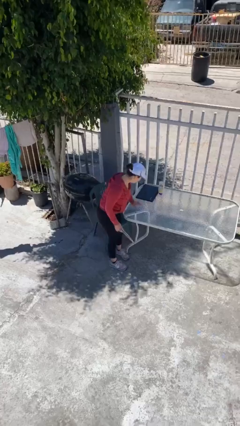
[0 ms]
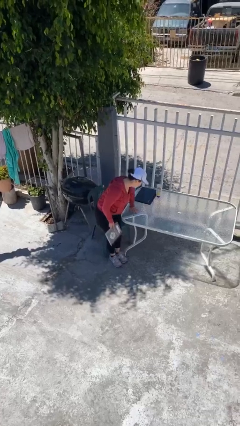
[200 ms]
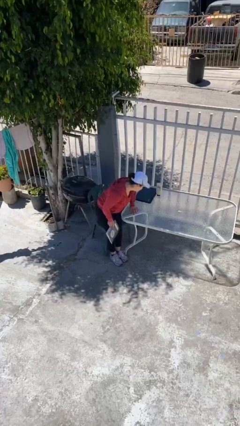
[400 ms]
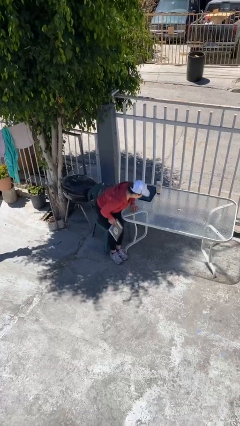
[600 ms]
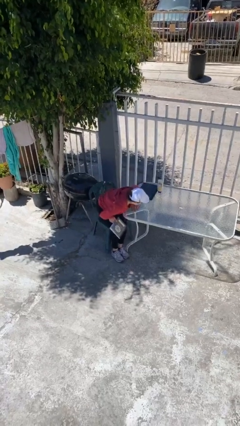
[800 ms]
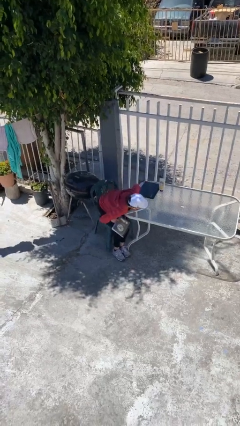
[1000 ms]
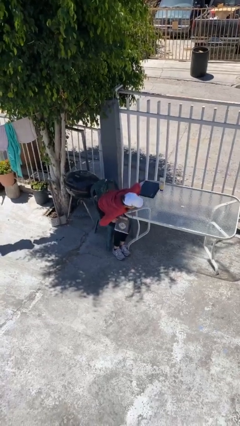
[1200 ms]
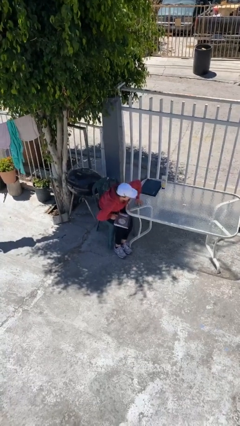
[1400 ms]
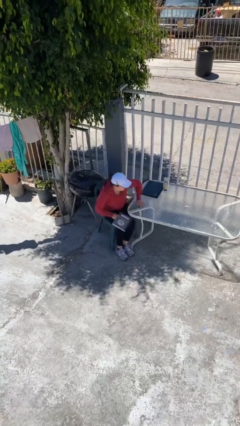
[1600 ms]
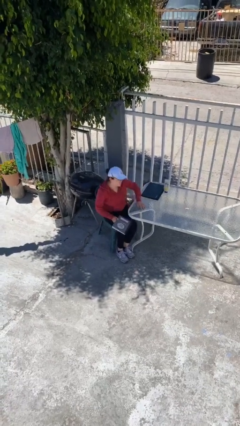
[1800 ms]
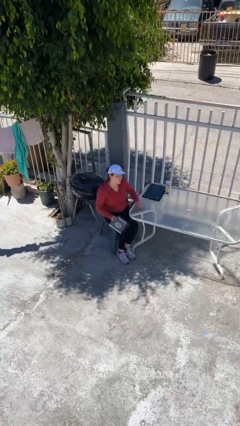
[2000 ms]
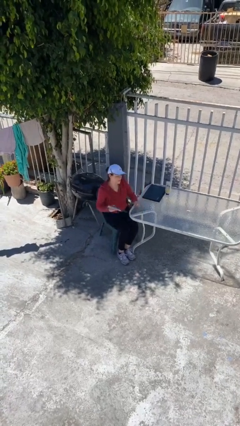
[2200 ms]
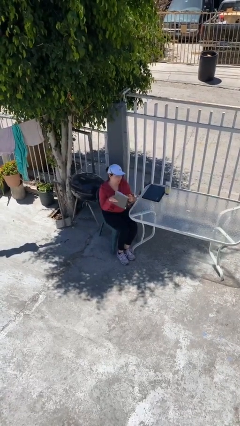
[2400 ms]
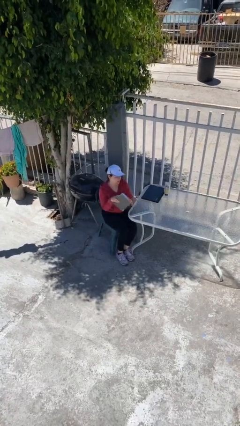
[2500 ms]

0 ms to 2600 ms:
person sits down

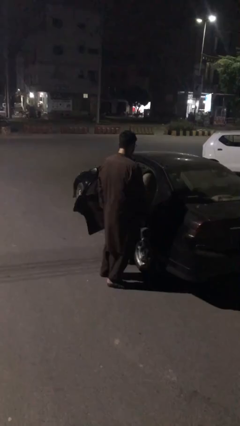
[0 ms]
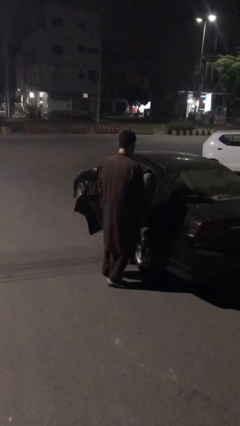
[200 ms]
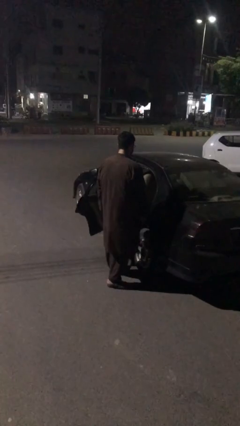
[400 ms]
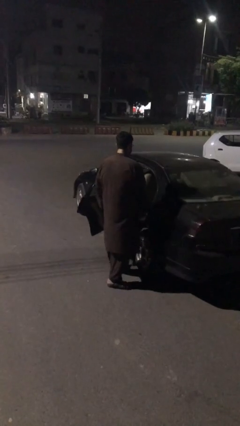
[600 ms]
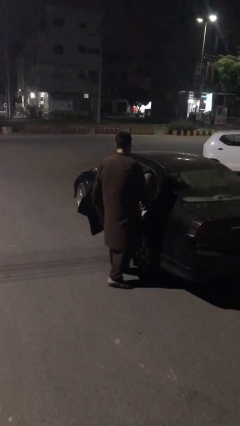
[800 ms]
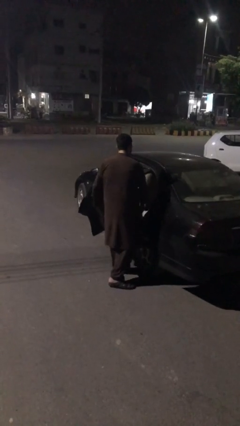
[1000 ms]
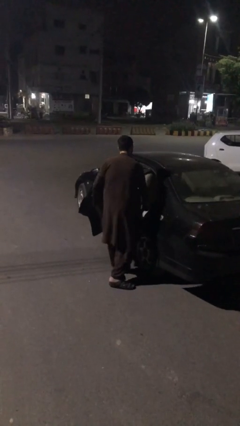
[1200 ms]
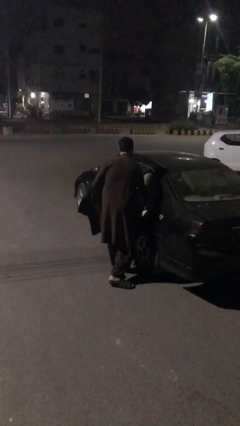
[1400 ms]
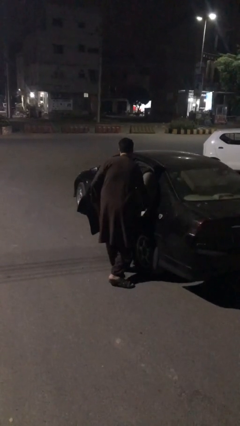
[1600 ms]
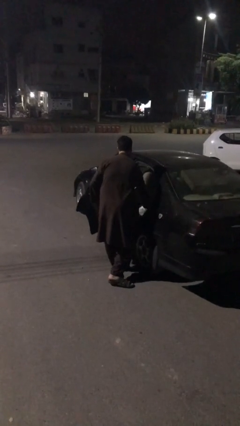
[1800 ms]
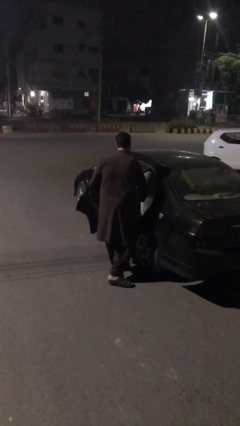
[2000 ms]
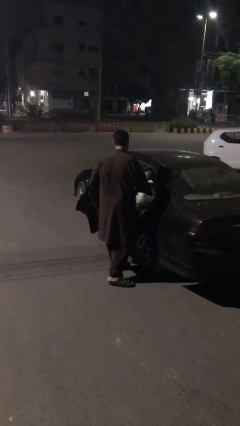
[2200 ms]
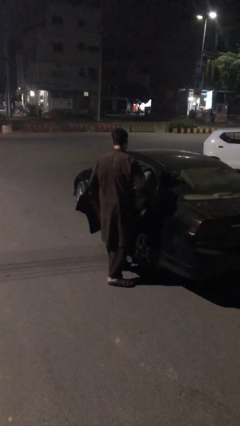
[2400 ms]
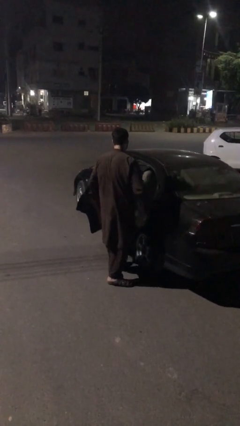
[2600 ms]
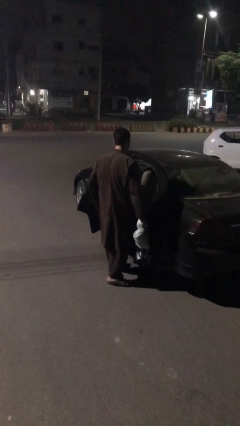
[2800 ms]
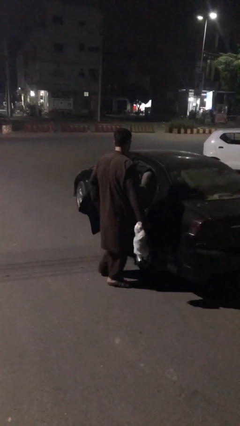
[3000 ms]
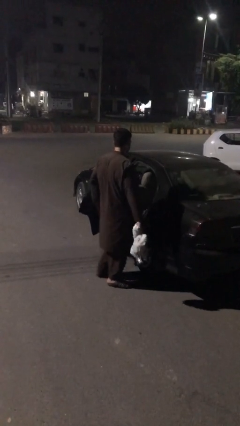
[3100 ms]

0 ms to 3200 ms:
person unloads car

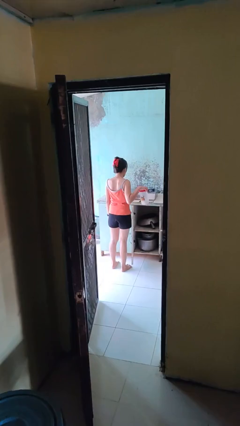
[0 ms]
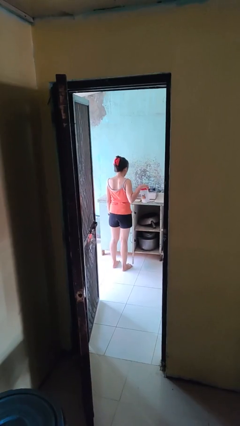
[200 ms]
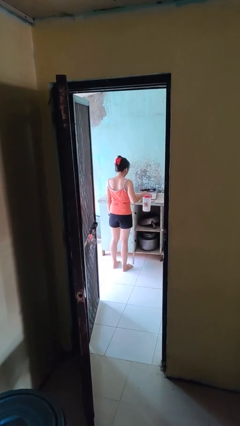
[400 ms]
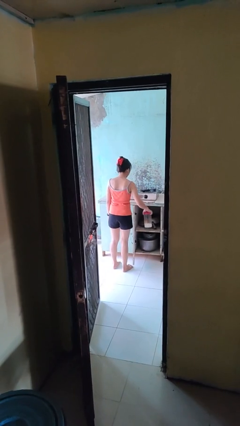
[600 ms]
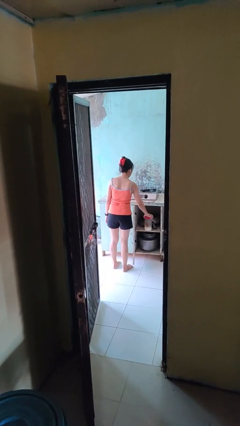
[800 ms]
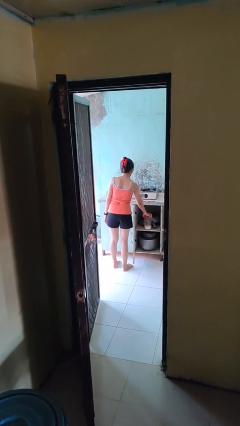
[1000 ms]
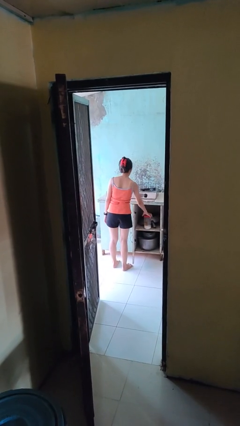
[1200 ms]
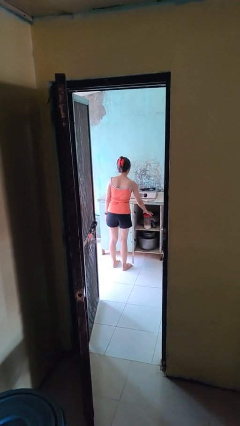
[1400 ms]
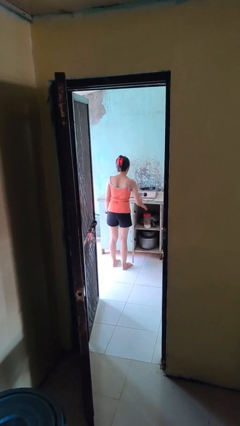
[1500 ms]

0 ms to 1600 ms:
person puts down object into cabinet

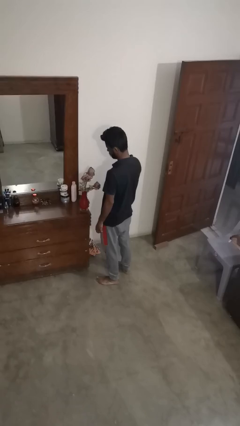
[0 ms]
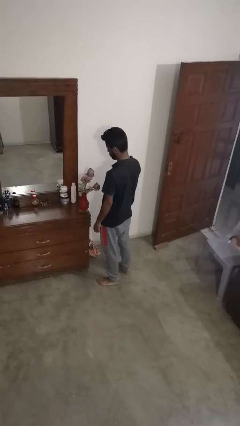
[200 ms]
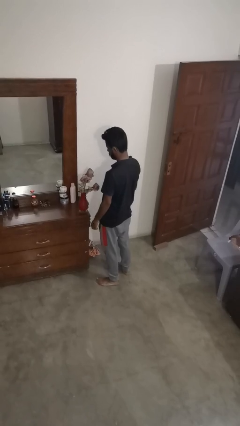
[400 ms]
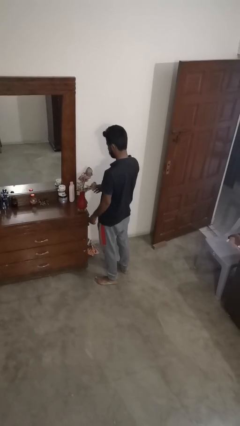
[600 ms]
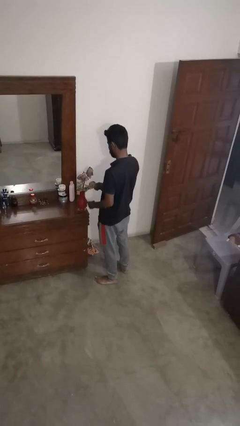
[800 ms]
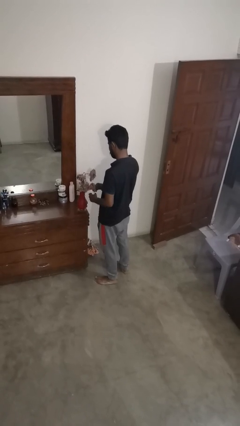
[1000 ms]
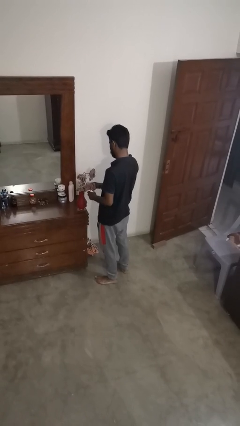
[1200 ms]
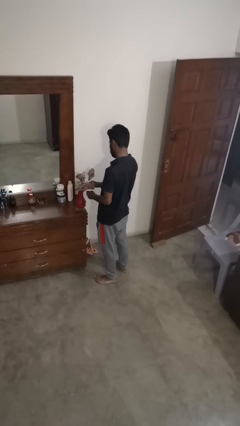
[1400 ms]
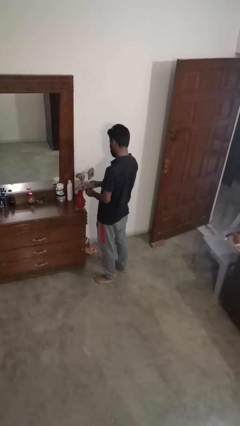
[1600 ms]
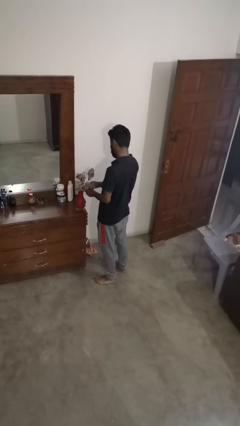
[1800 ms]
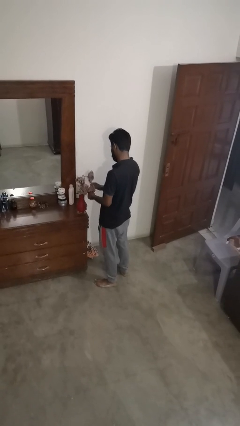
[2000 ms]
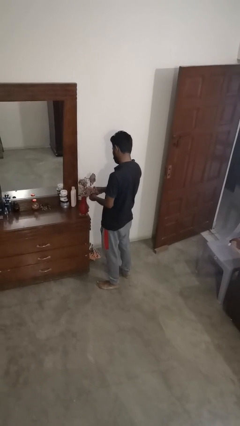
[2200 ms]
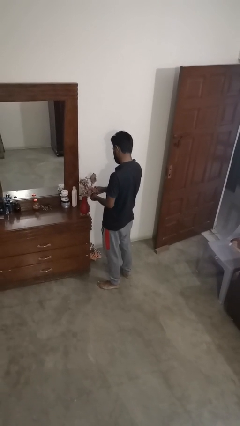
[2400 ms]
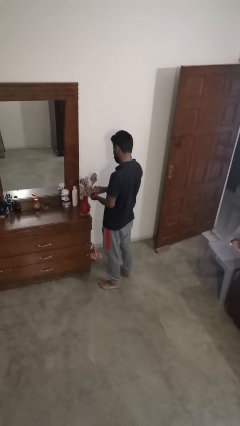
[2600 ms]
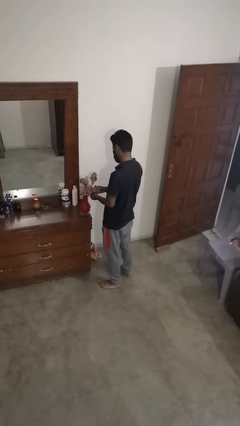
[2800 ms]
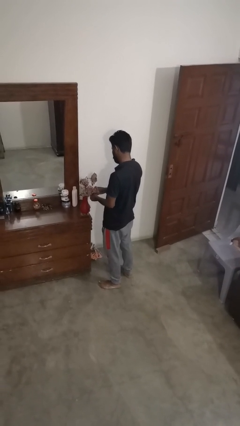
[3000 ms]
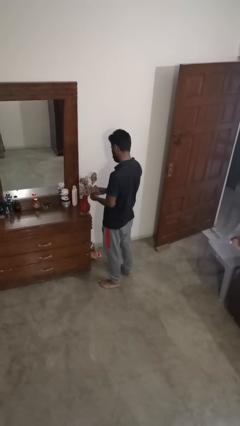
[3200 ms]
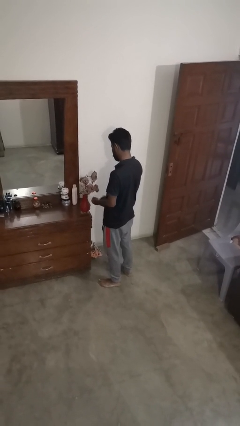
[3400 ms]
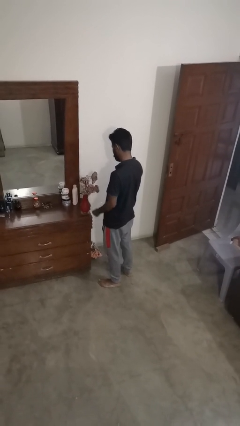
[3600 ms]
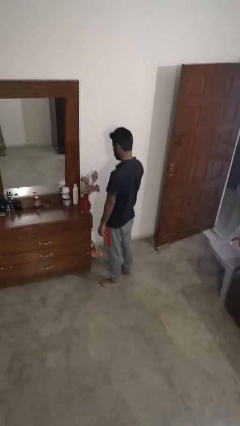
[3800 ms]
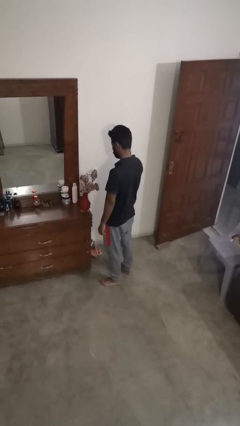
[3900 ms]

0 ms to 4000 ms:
person arranges flowers in vase

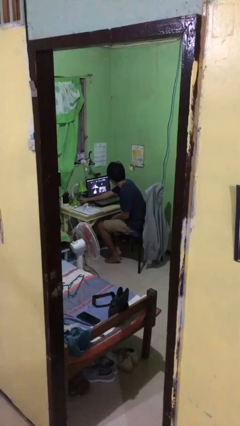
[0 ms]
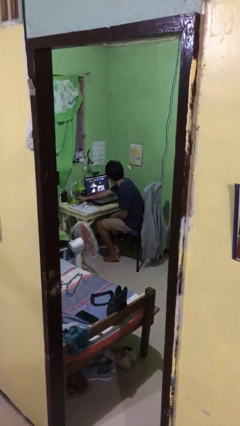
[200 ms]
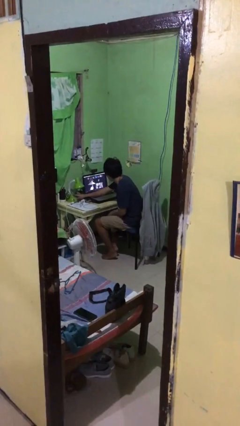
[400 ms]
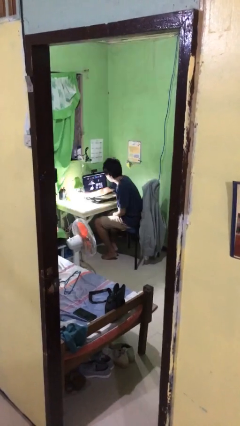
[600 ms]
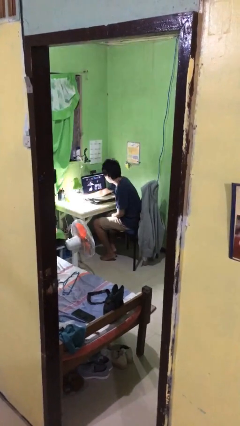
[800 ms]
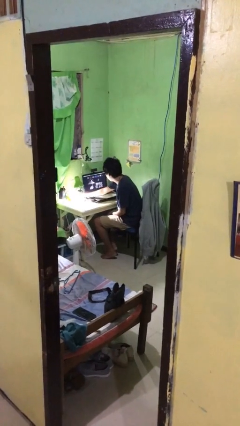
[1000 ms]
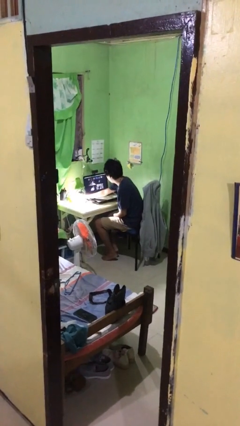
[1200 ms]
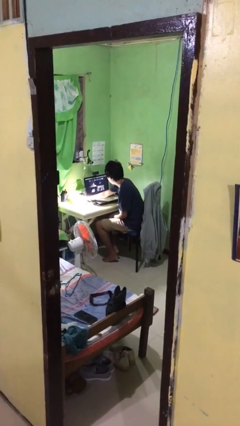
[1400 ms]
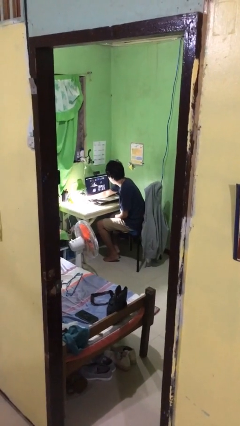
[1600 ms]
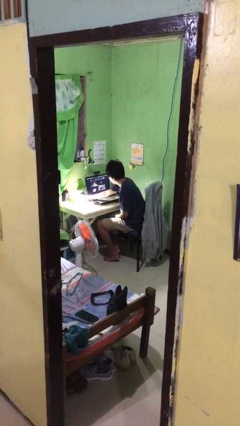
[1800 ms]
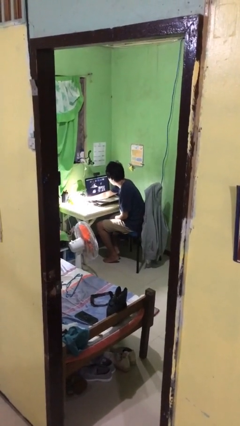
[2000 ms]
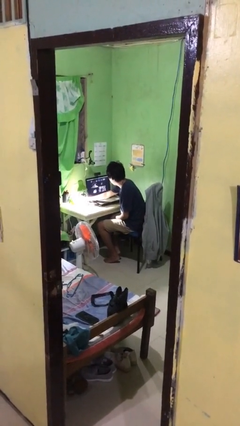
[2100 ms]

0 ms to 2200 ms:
person turns on lamp

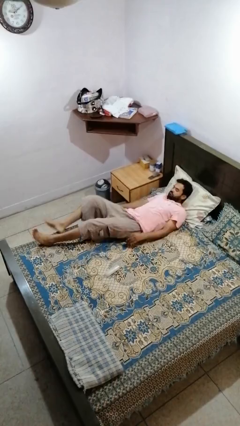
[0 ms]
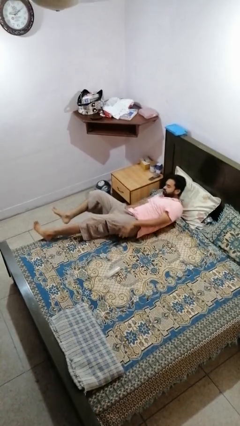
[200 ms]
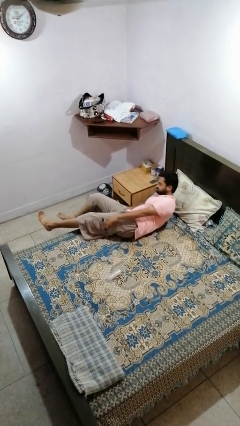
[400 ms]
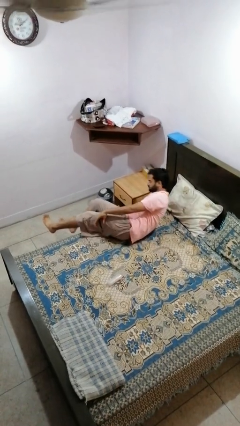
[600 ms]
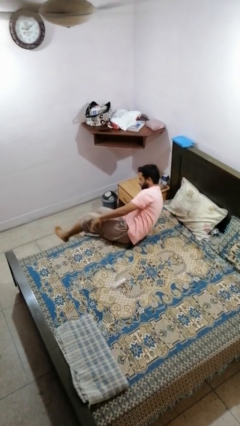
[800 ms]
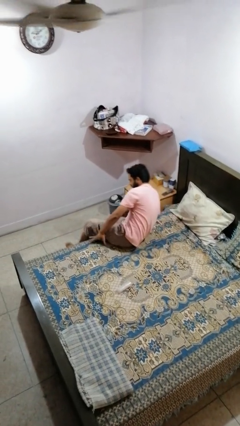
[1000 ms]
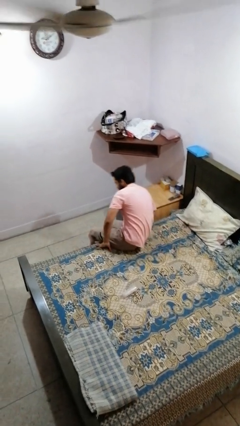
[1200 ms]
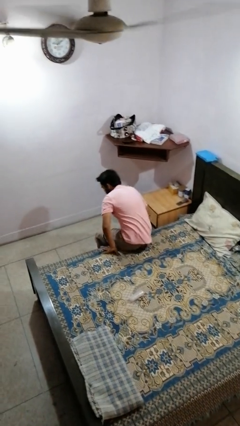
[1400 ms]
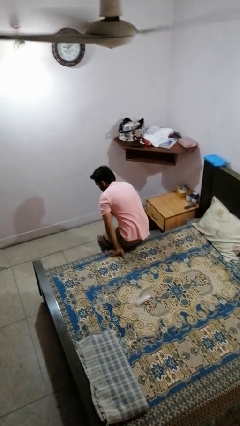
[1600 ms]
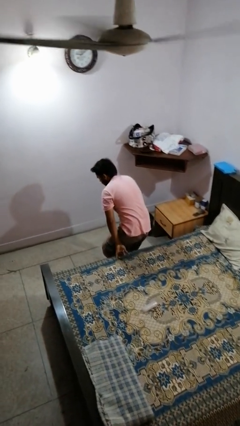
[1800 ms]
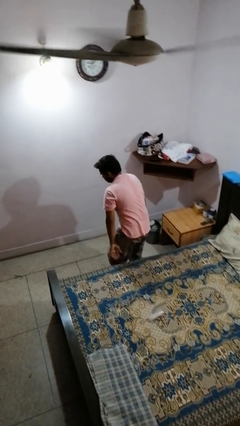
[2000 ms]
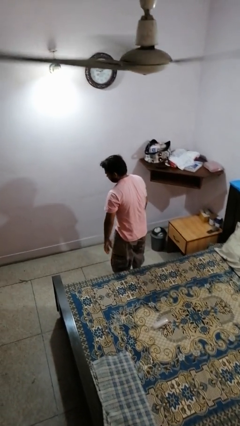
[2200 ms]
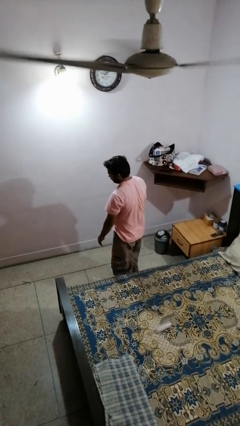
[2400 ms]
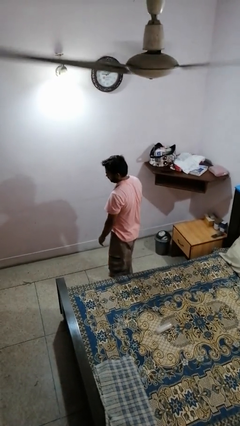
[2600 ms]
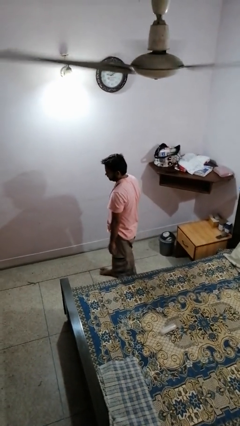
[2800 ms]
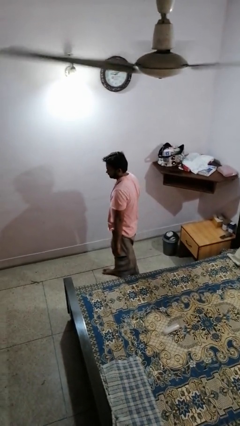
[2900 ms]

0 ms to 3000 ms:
person stands up
